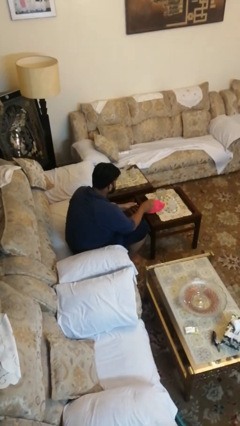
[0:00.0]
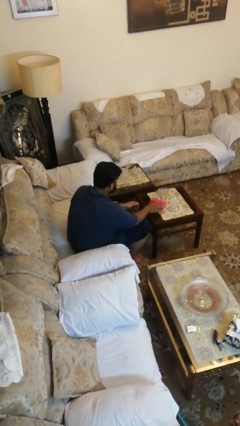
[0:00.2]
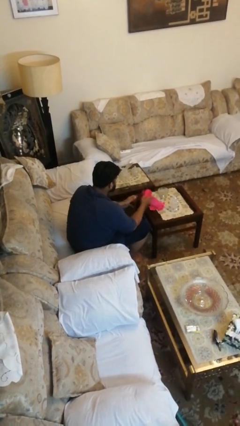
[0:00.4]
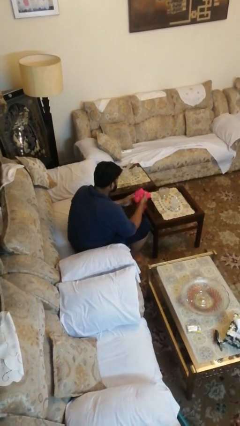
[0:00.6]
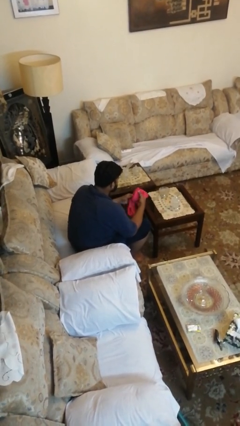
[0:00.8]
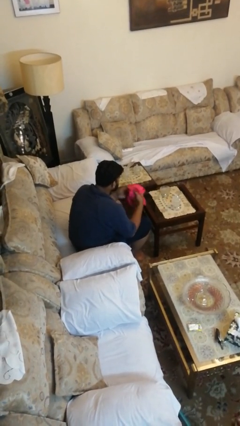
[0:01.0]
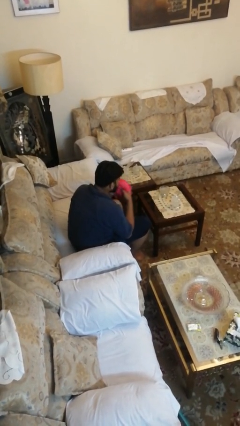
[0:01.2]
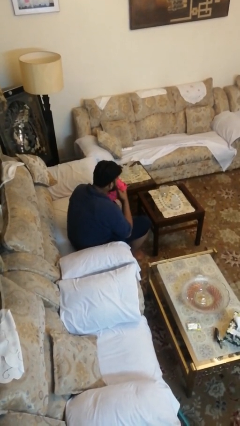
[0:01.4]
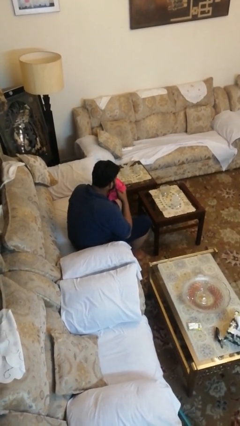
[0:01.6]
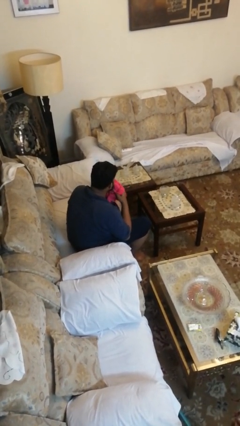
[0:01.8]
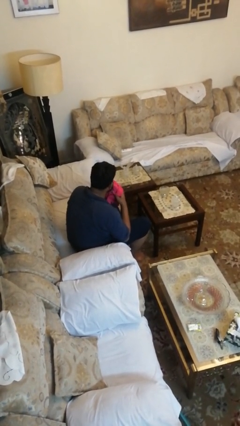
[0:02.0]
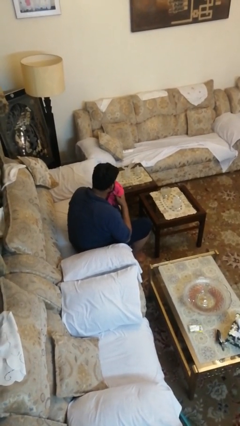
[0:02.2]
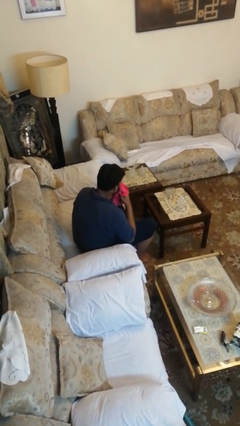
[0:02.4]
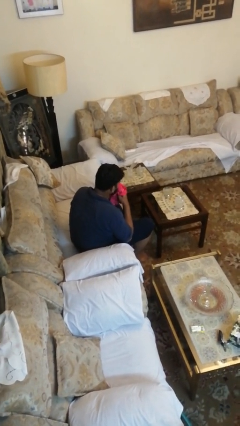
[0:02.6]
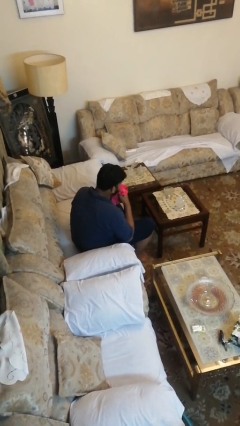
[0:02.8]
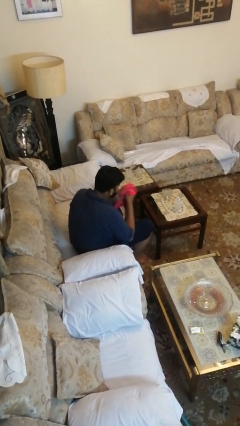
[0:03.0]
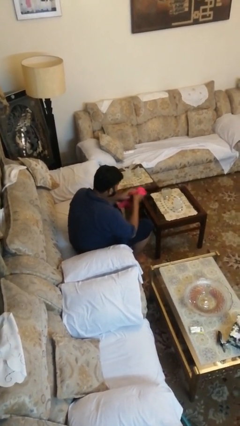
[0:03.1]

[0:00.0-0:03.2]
person wipes mouth with napkin

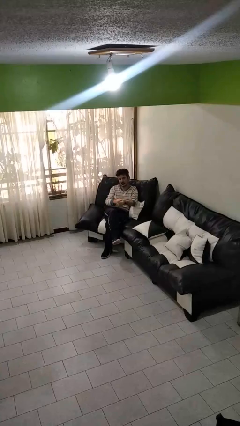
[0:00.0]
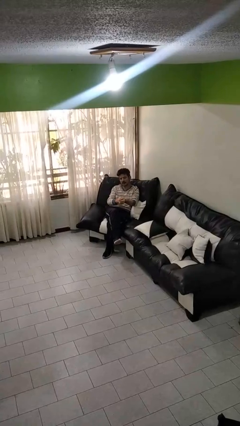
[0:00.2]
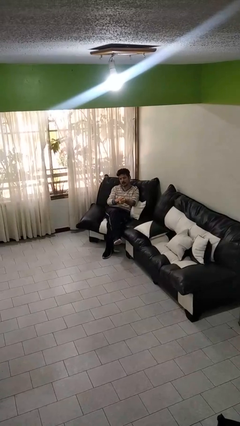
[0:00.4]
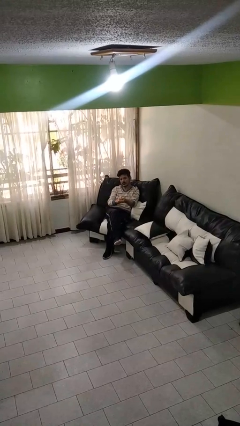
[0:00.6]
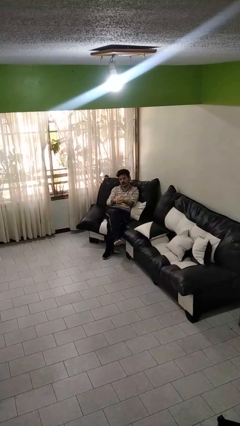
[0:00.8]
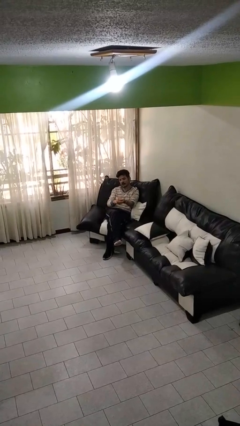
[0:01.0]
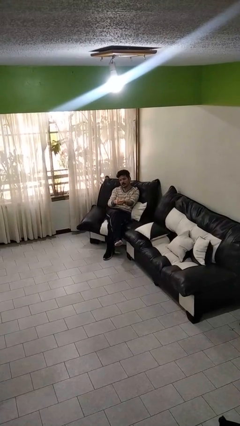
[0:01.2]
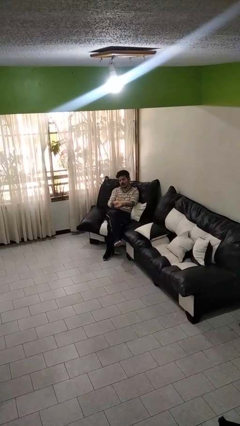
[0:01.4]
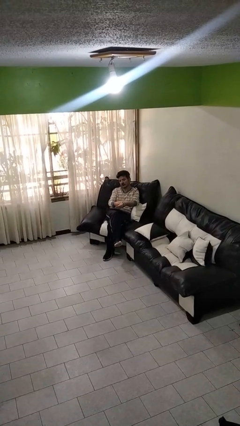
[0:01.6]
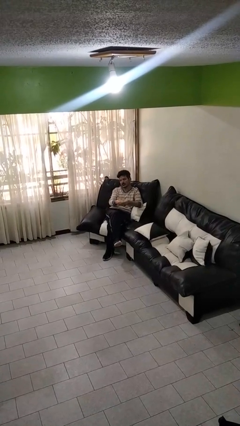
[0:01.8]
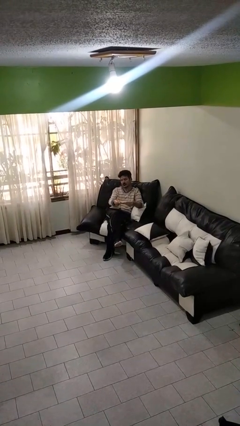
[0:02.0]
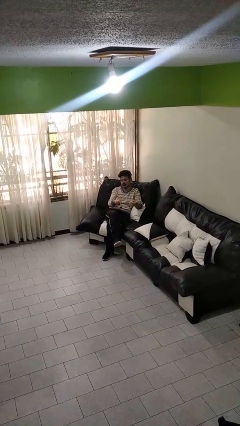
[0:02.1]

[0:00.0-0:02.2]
person takes off wristwatch

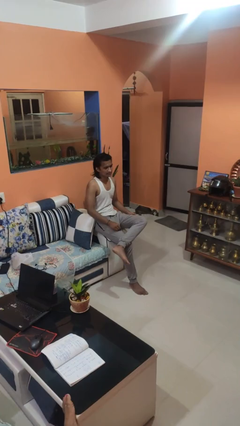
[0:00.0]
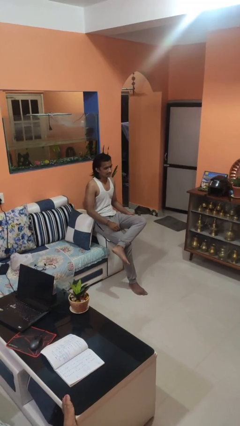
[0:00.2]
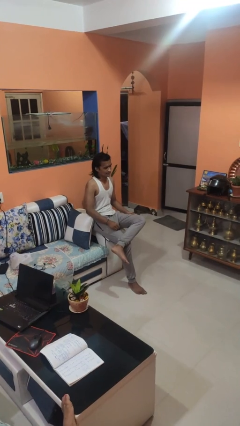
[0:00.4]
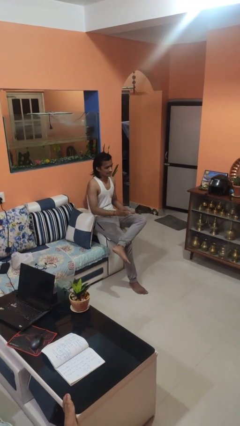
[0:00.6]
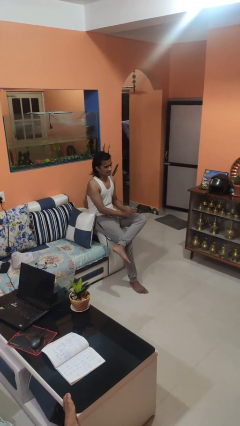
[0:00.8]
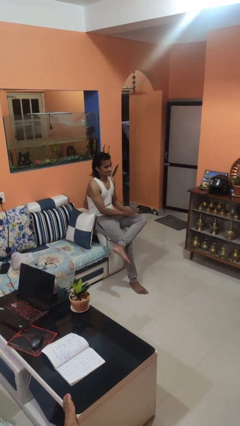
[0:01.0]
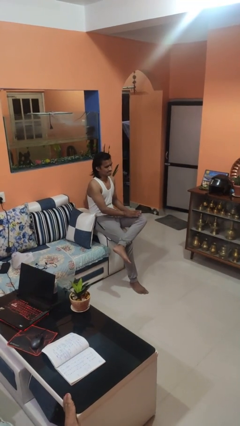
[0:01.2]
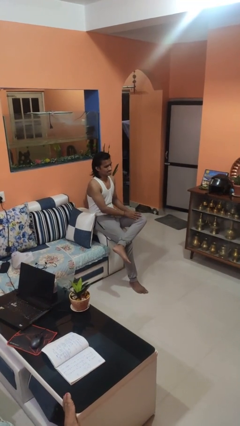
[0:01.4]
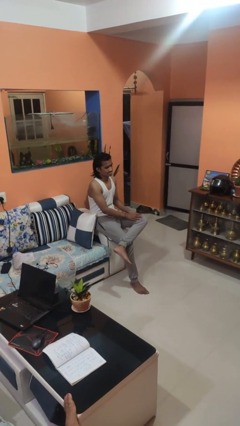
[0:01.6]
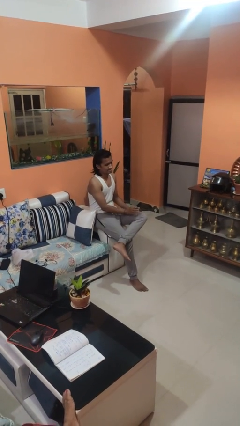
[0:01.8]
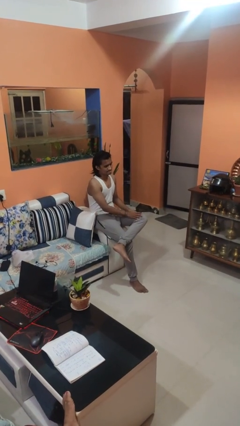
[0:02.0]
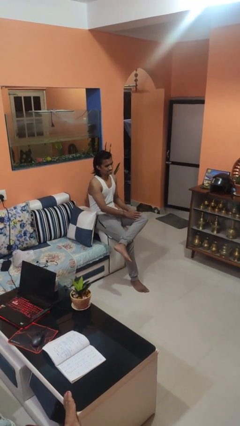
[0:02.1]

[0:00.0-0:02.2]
person slaps hands on thighs

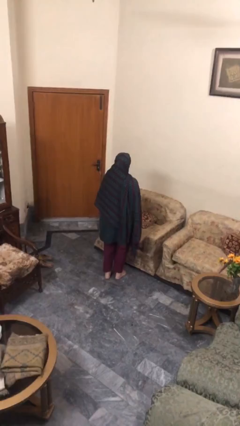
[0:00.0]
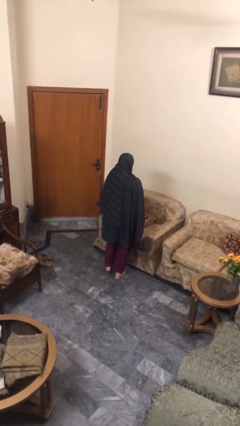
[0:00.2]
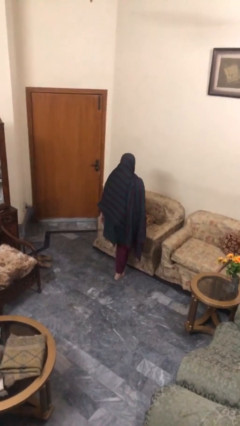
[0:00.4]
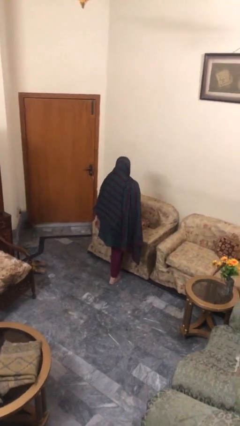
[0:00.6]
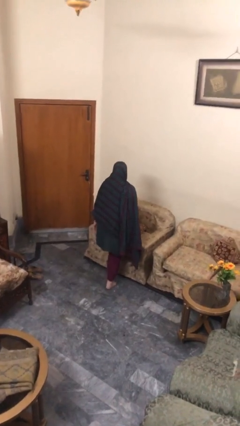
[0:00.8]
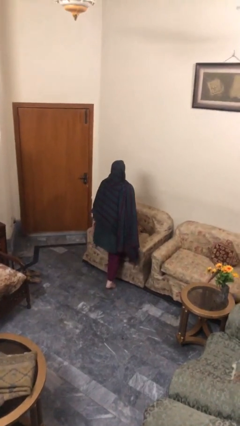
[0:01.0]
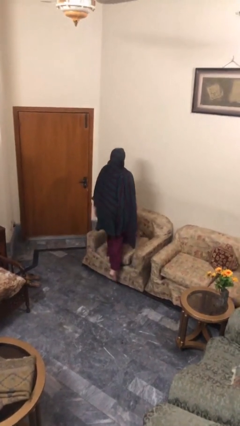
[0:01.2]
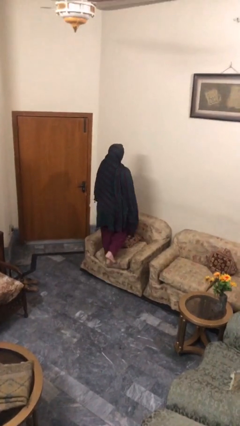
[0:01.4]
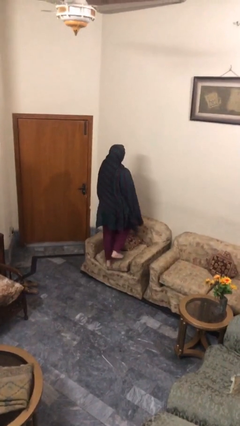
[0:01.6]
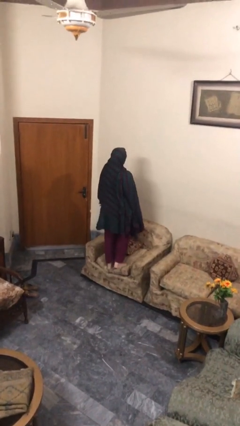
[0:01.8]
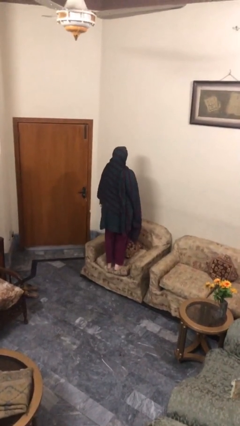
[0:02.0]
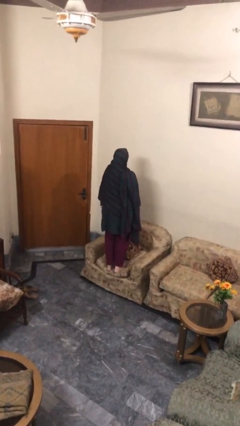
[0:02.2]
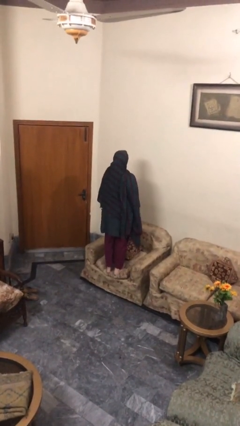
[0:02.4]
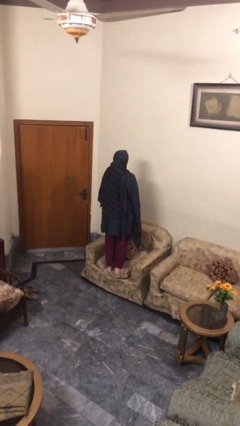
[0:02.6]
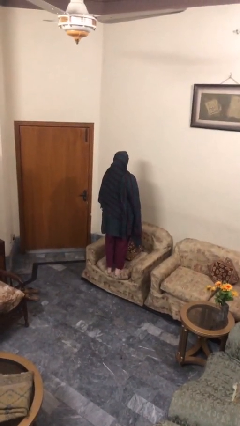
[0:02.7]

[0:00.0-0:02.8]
person climbs on couch

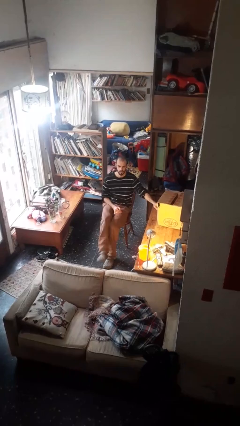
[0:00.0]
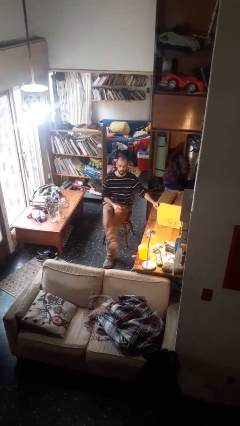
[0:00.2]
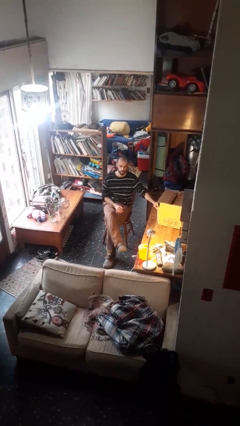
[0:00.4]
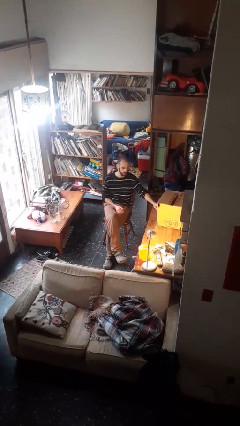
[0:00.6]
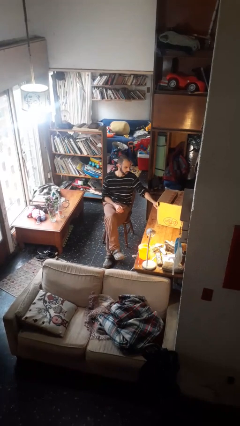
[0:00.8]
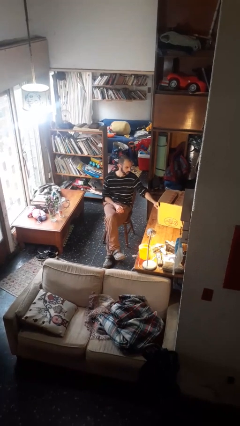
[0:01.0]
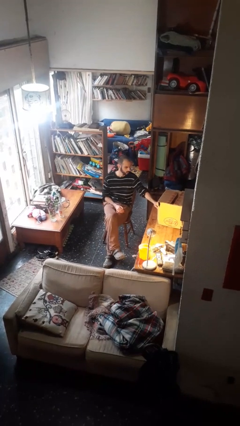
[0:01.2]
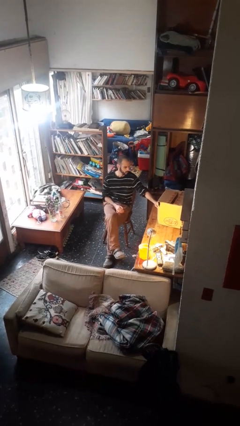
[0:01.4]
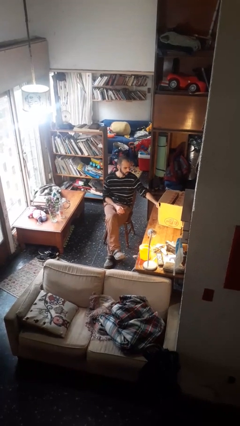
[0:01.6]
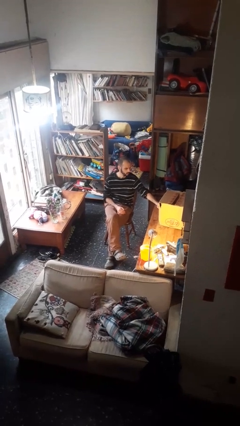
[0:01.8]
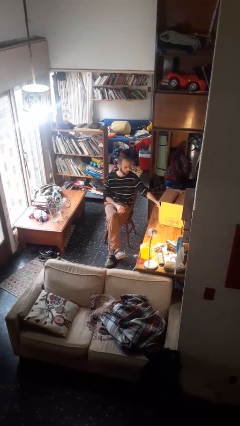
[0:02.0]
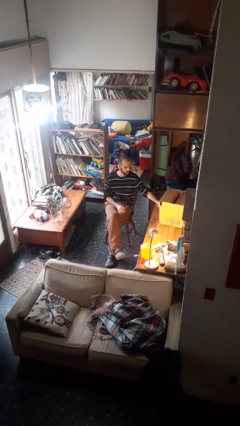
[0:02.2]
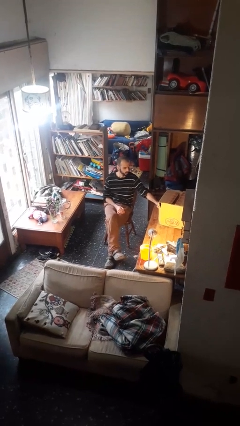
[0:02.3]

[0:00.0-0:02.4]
person crosses legs

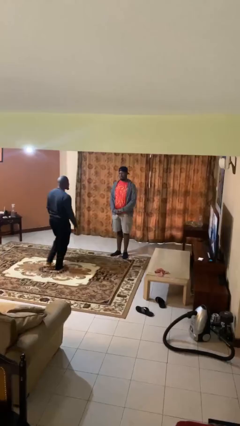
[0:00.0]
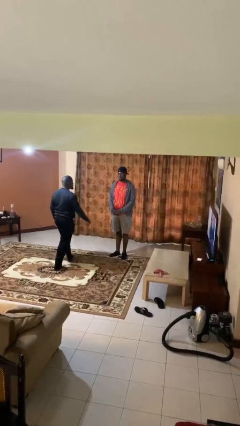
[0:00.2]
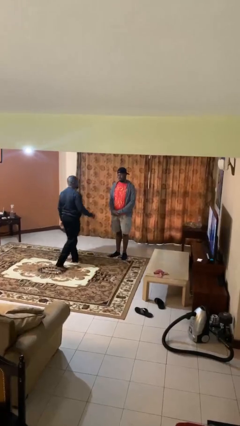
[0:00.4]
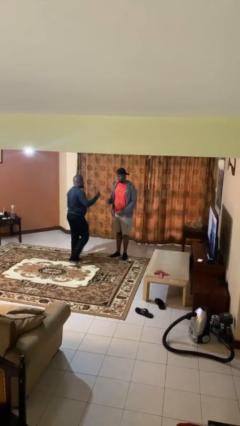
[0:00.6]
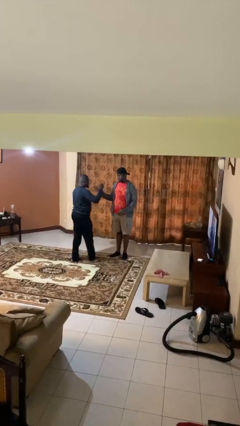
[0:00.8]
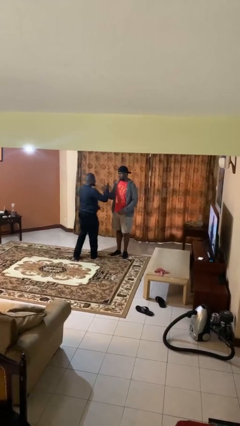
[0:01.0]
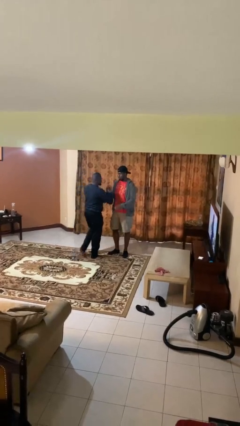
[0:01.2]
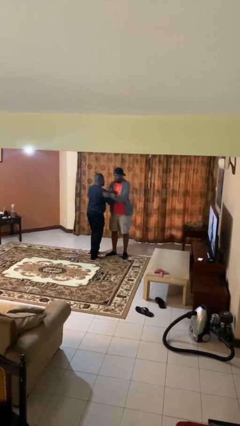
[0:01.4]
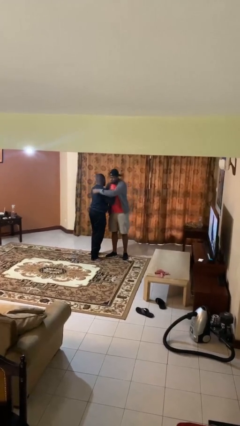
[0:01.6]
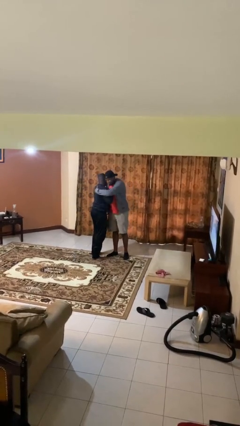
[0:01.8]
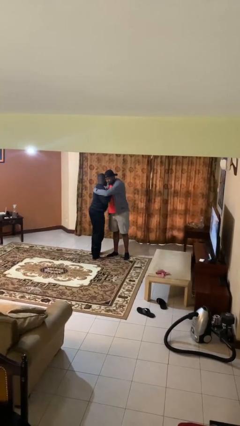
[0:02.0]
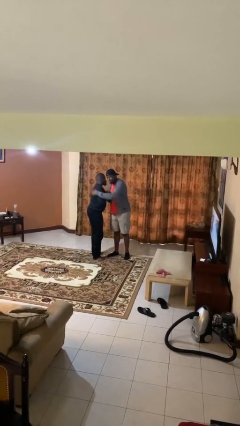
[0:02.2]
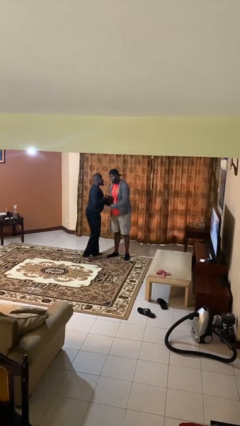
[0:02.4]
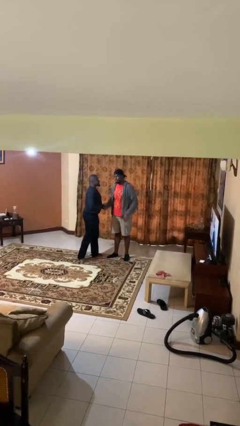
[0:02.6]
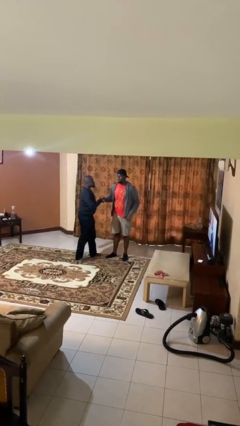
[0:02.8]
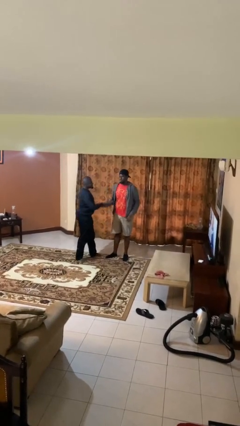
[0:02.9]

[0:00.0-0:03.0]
person embraces person

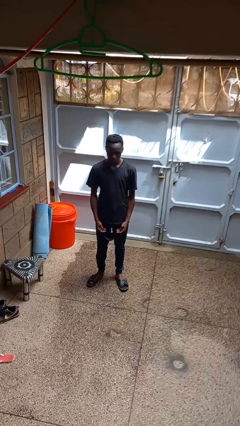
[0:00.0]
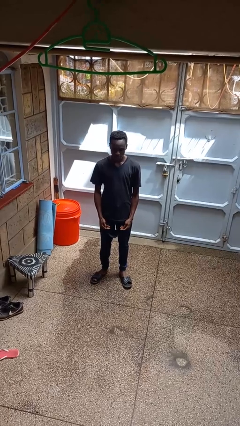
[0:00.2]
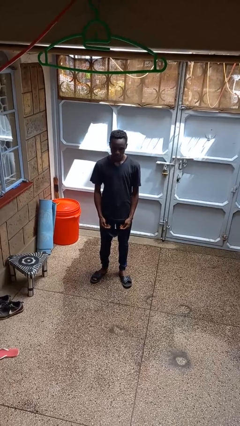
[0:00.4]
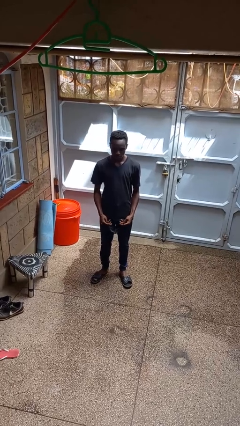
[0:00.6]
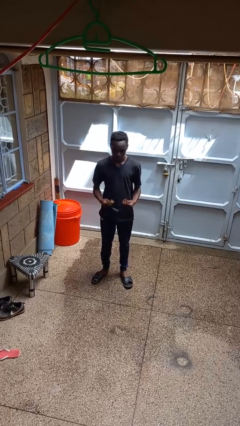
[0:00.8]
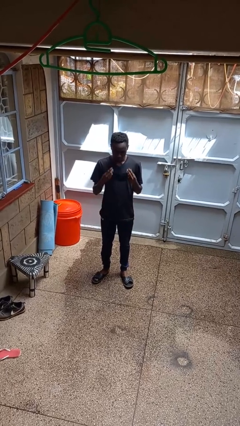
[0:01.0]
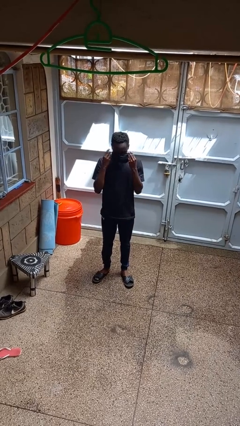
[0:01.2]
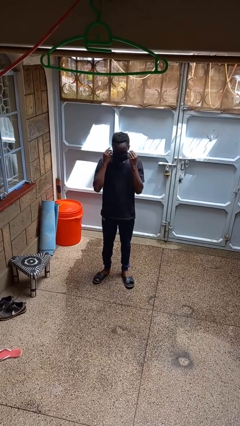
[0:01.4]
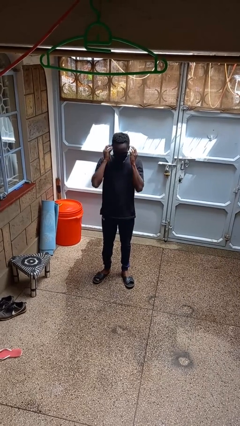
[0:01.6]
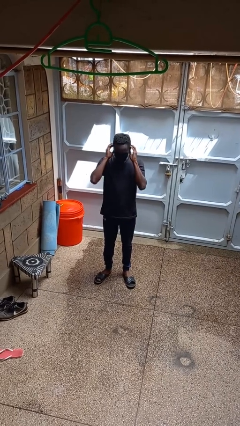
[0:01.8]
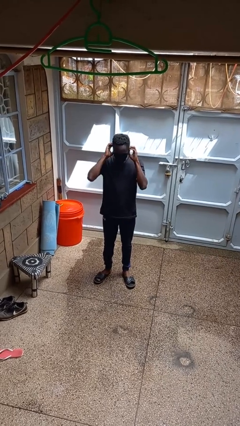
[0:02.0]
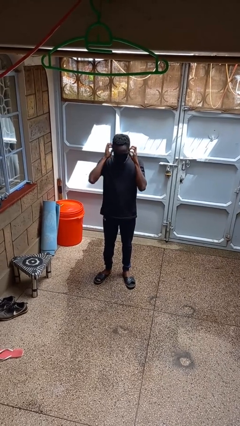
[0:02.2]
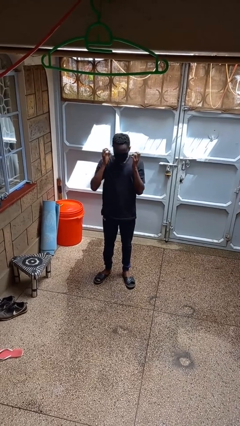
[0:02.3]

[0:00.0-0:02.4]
person puts on facemask
